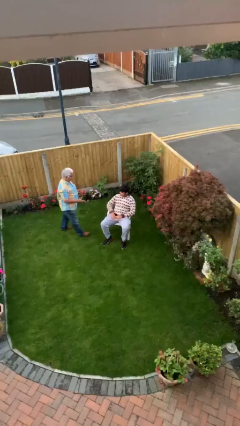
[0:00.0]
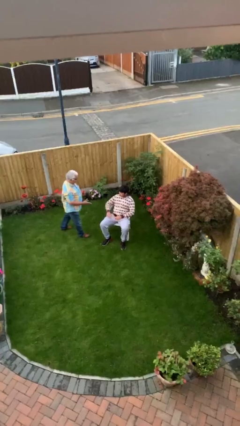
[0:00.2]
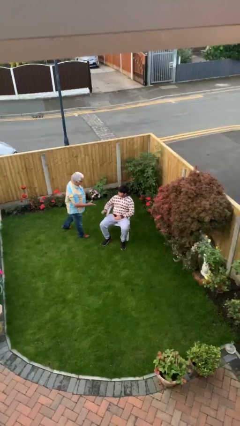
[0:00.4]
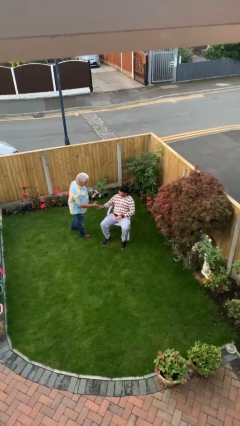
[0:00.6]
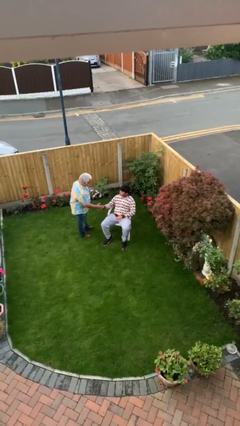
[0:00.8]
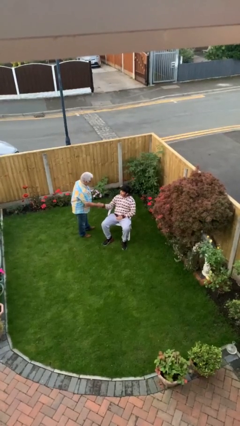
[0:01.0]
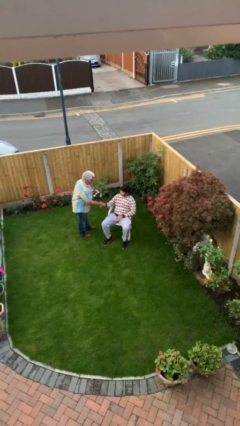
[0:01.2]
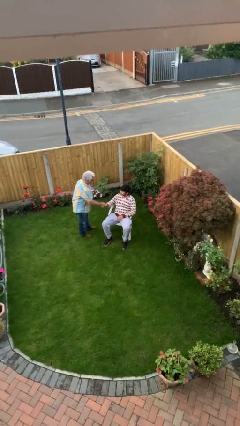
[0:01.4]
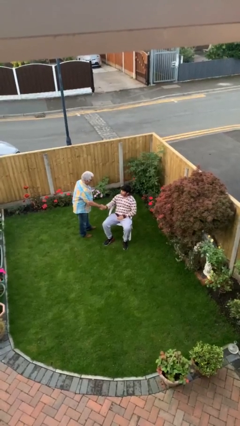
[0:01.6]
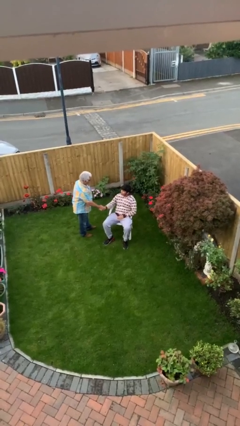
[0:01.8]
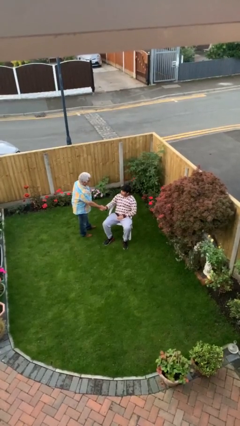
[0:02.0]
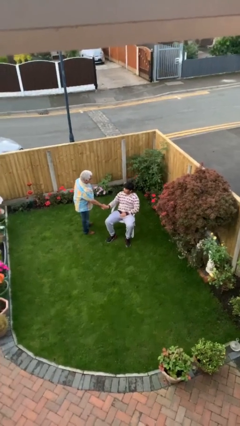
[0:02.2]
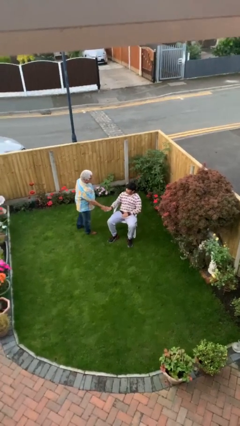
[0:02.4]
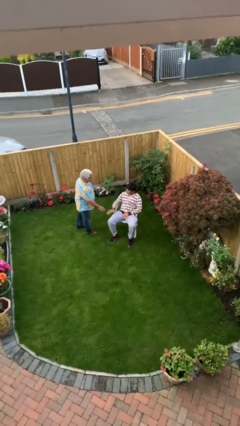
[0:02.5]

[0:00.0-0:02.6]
person shakes hand

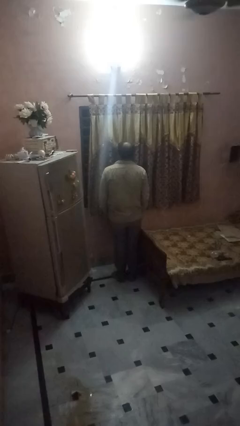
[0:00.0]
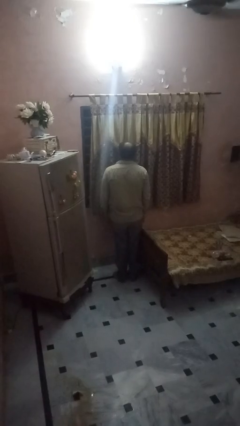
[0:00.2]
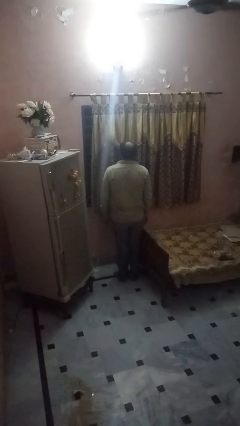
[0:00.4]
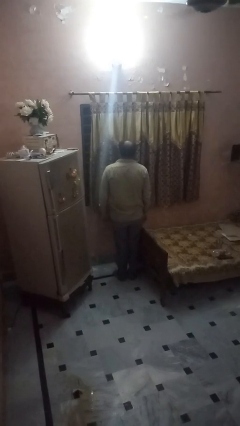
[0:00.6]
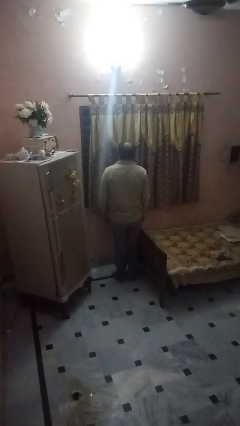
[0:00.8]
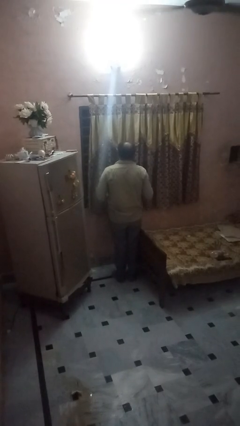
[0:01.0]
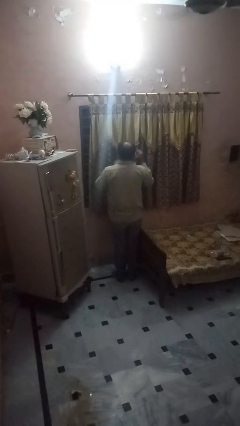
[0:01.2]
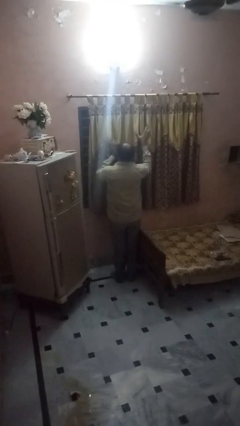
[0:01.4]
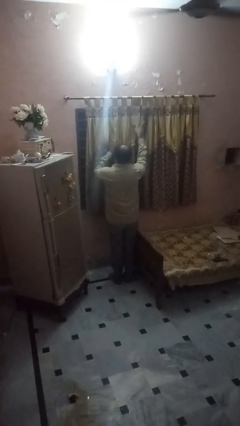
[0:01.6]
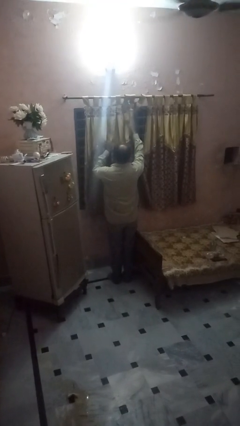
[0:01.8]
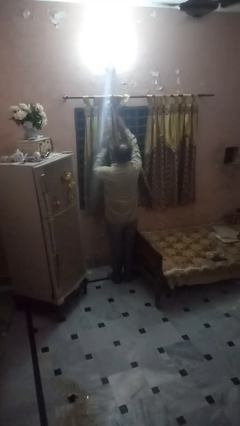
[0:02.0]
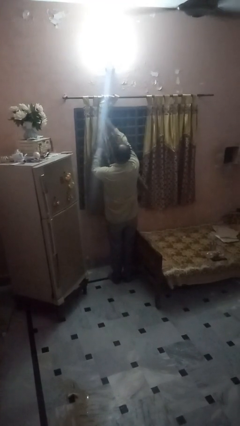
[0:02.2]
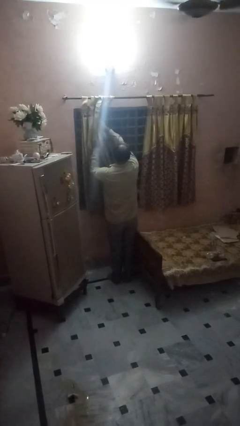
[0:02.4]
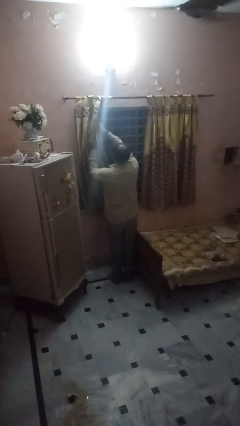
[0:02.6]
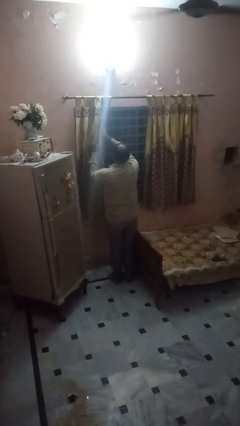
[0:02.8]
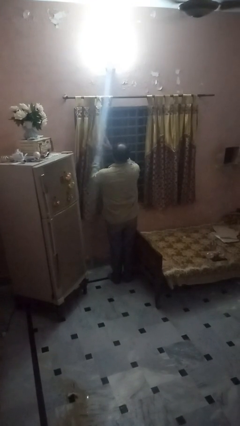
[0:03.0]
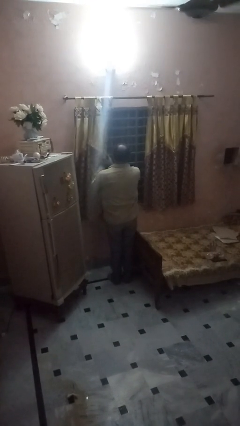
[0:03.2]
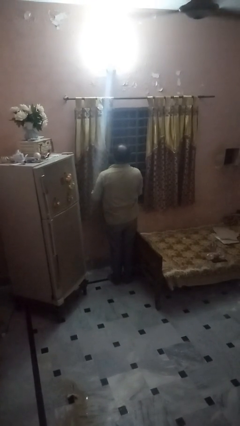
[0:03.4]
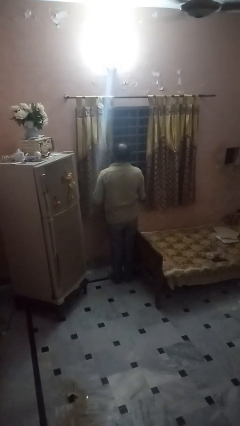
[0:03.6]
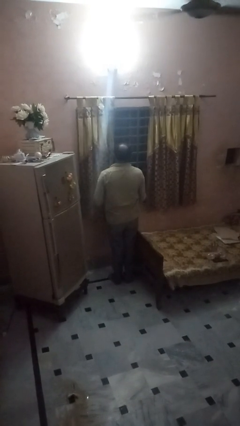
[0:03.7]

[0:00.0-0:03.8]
person opens curtains

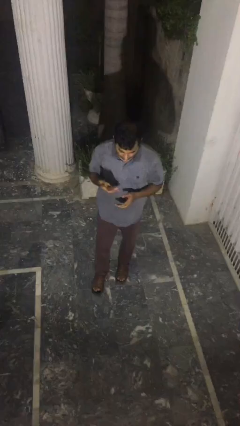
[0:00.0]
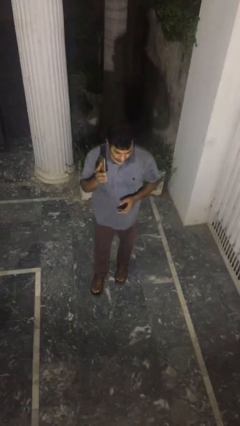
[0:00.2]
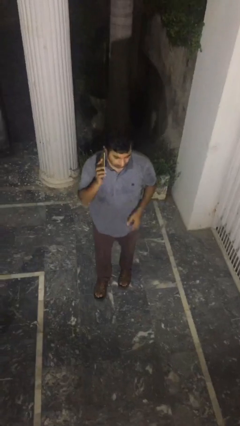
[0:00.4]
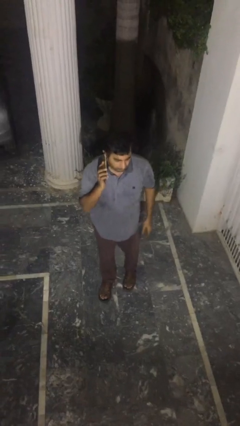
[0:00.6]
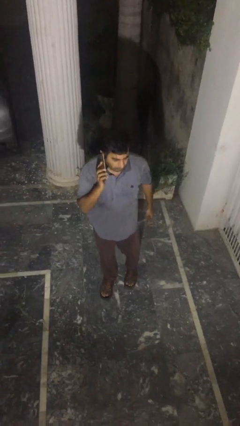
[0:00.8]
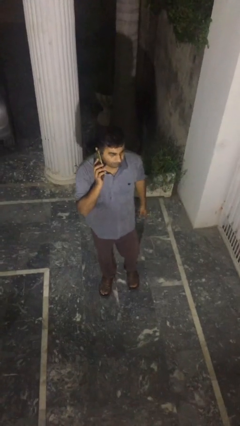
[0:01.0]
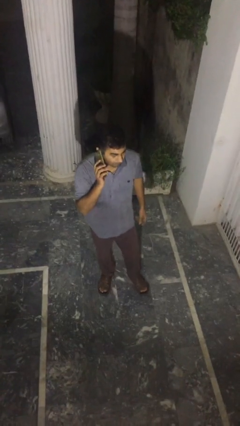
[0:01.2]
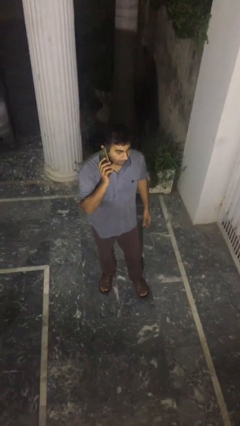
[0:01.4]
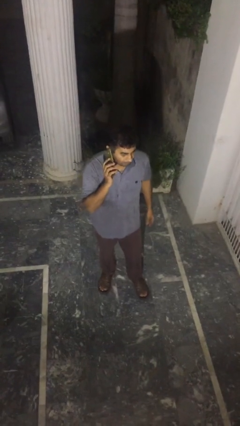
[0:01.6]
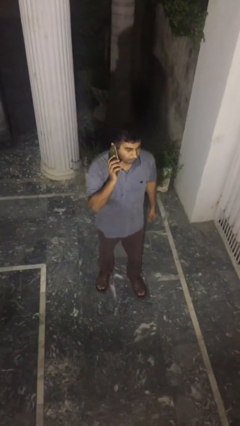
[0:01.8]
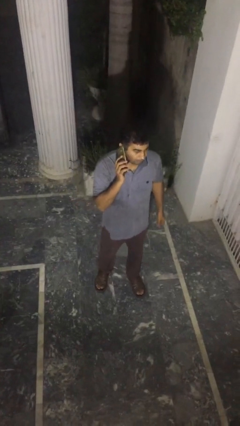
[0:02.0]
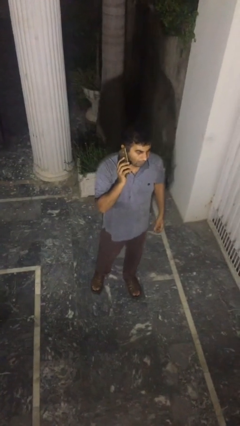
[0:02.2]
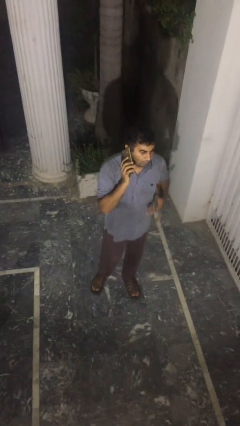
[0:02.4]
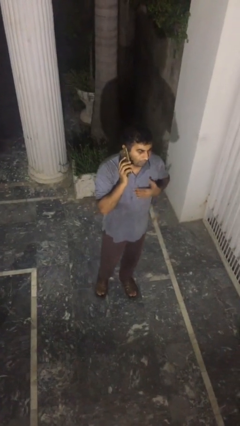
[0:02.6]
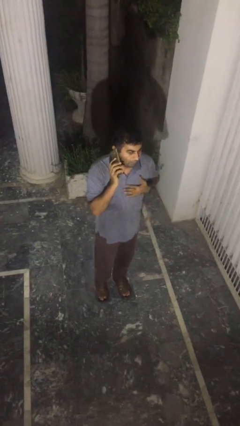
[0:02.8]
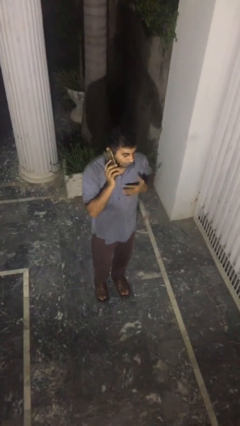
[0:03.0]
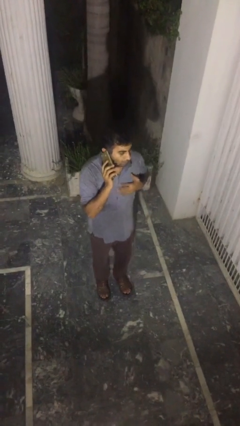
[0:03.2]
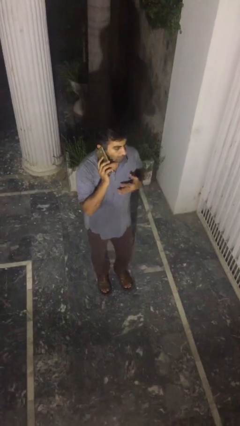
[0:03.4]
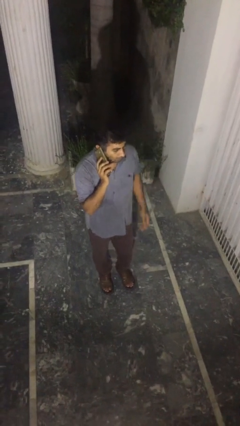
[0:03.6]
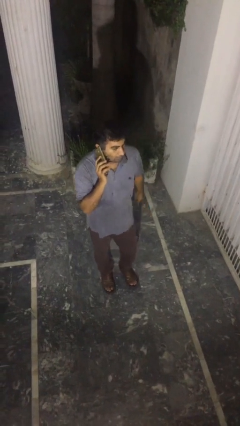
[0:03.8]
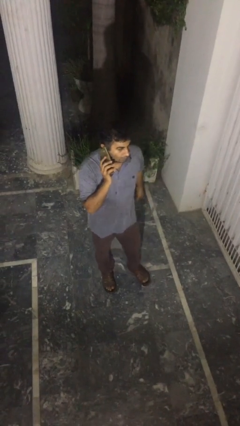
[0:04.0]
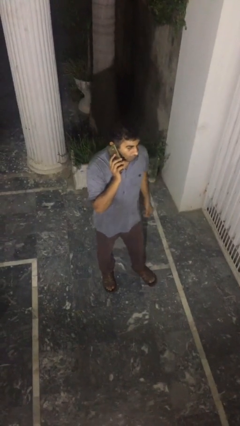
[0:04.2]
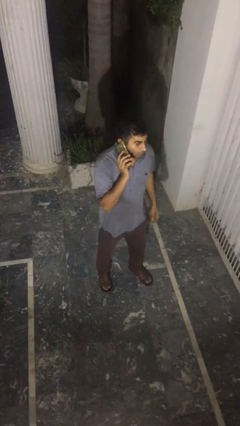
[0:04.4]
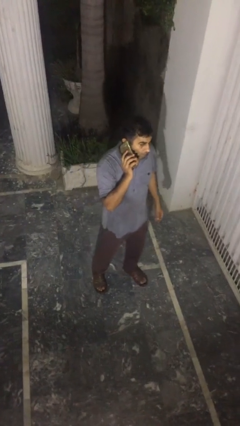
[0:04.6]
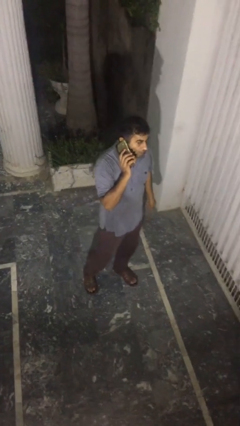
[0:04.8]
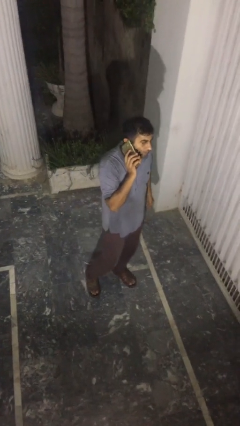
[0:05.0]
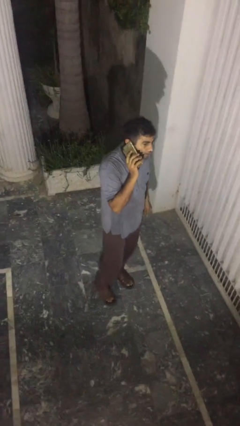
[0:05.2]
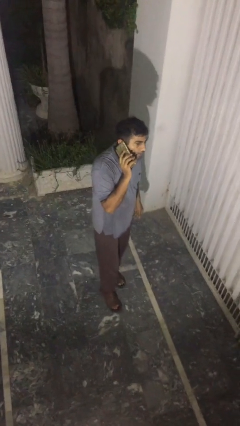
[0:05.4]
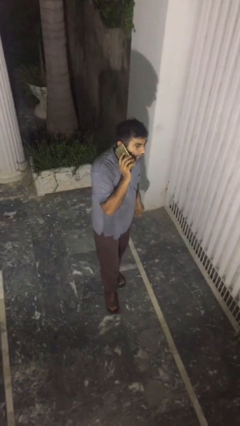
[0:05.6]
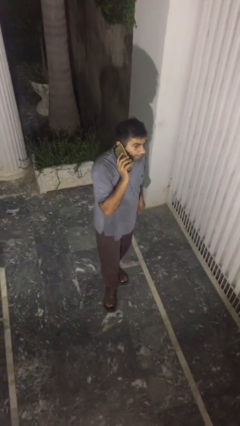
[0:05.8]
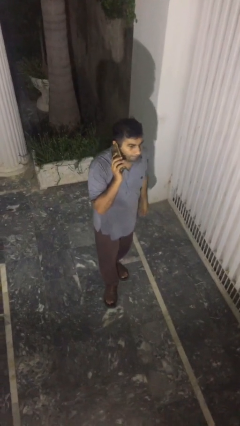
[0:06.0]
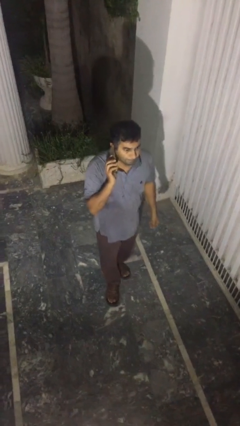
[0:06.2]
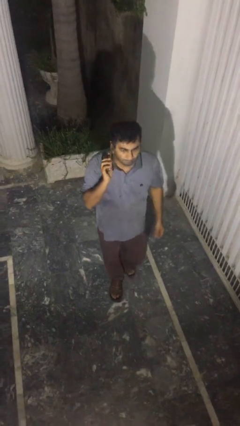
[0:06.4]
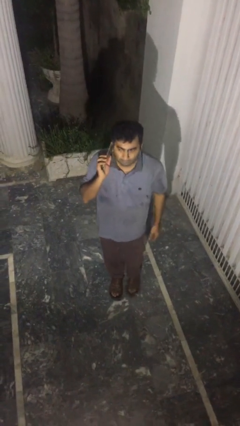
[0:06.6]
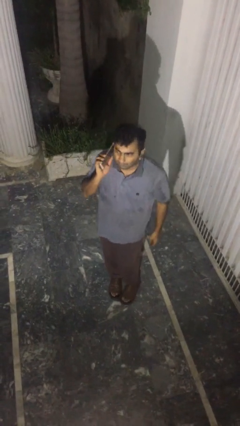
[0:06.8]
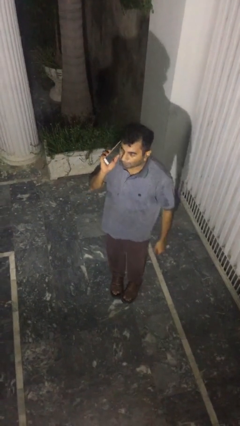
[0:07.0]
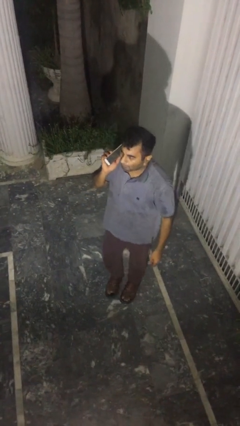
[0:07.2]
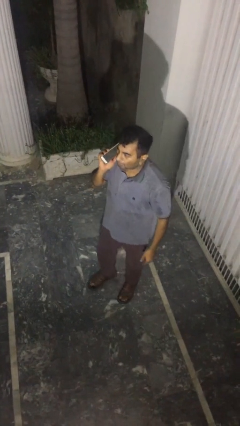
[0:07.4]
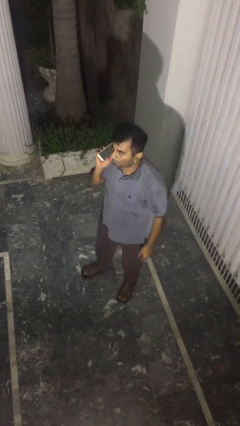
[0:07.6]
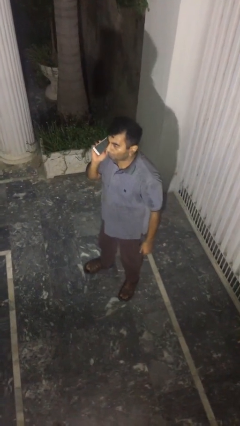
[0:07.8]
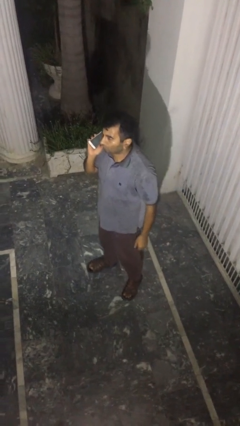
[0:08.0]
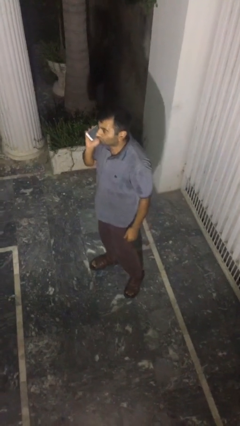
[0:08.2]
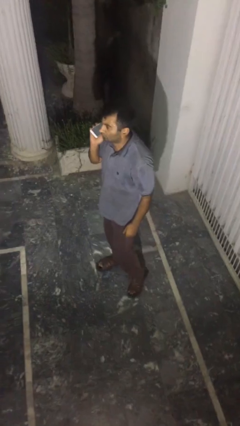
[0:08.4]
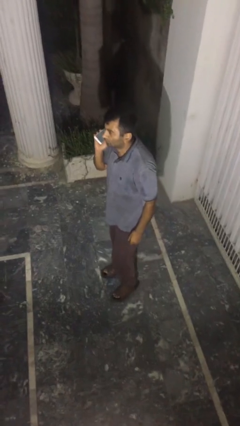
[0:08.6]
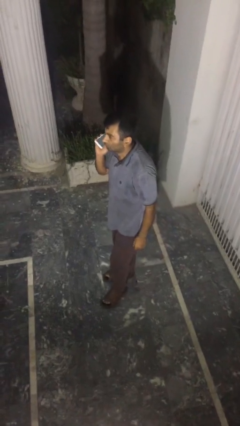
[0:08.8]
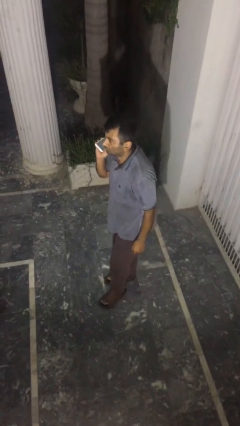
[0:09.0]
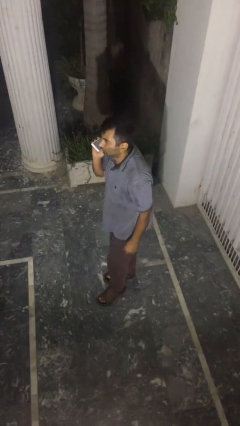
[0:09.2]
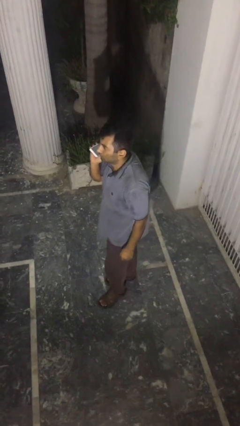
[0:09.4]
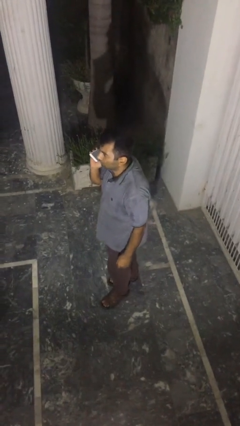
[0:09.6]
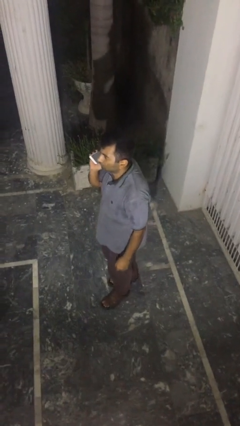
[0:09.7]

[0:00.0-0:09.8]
person talks on phone

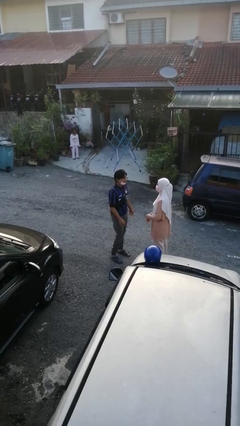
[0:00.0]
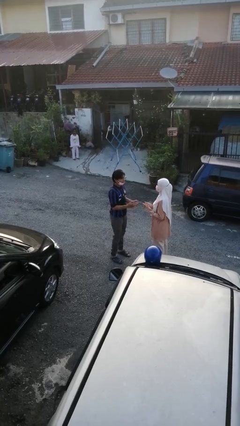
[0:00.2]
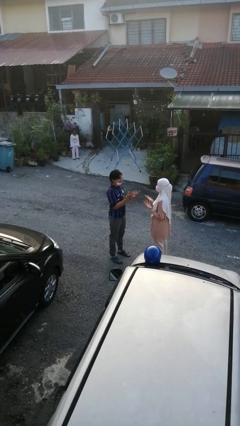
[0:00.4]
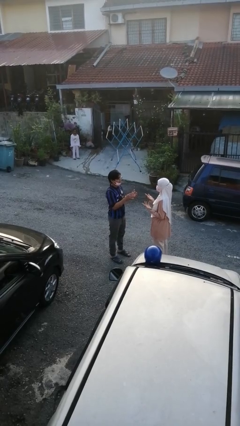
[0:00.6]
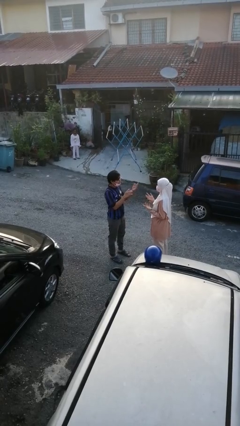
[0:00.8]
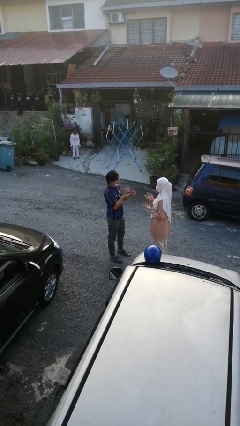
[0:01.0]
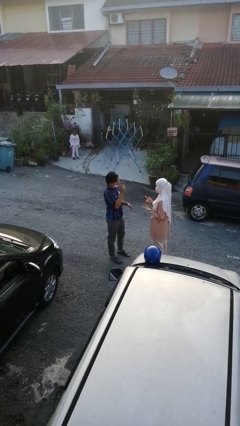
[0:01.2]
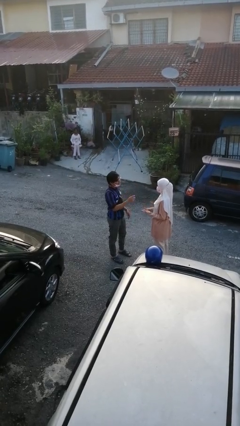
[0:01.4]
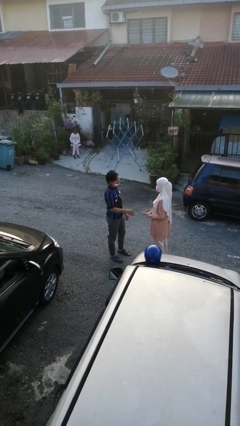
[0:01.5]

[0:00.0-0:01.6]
person talks to person

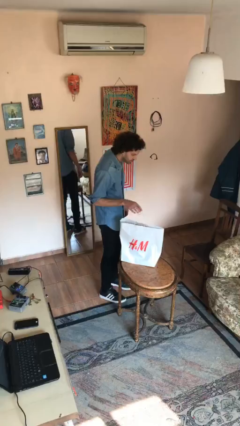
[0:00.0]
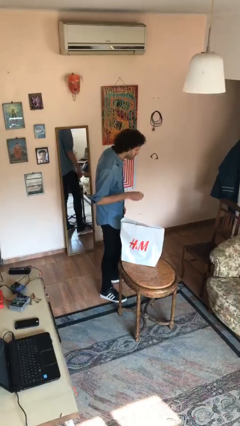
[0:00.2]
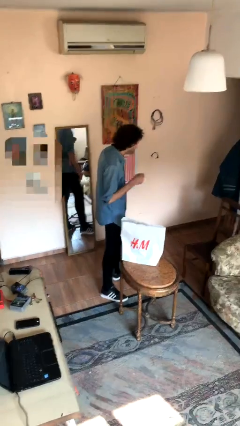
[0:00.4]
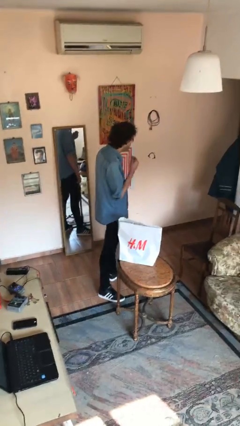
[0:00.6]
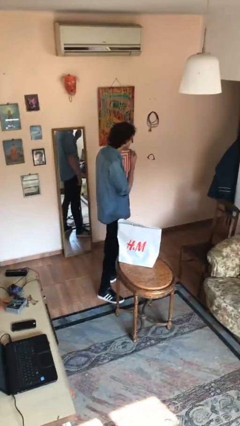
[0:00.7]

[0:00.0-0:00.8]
person puts down object on table
